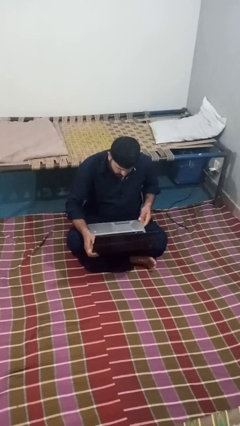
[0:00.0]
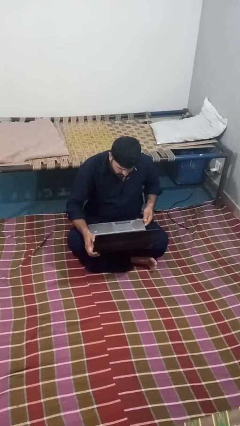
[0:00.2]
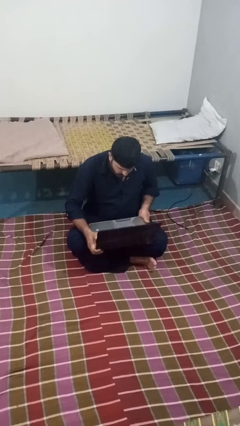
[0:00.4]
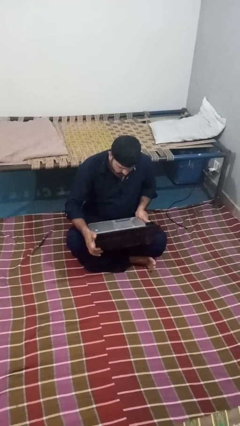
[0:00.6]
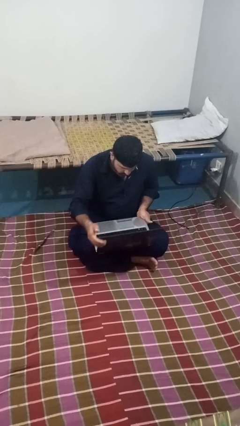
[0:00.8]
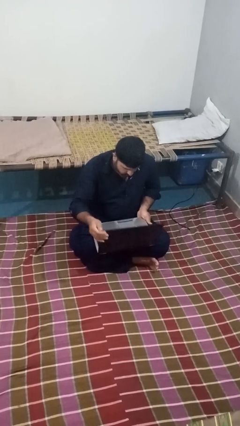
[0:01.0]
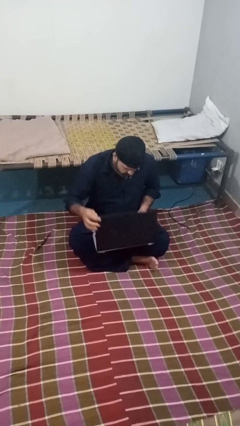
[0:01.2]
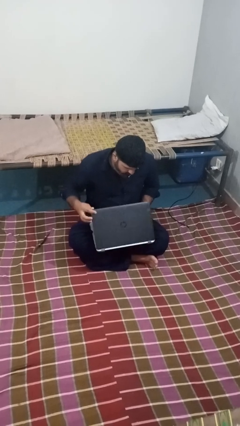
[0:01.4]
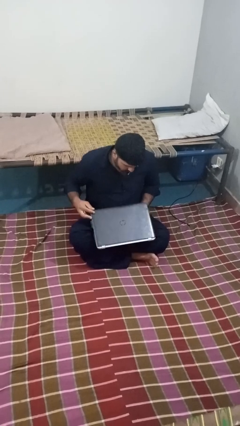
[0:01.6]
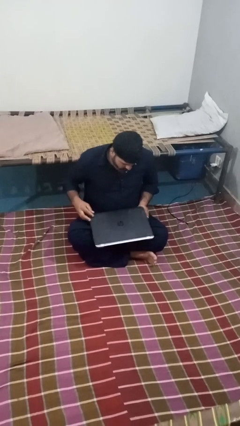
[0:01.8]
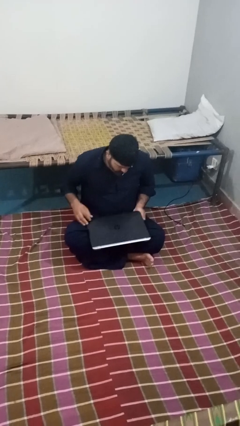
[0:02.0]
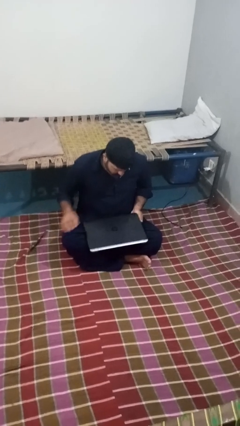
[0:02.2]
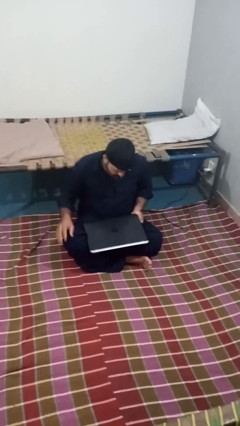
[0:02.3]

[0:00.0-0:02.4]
person closes laptop

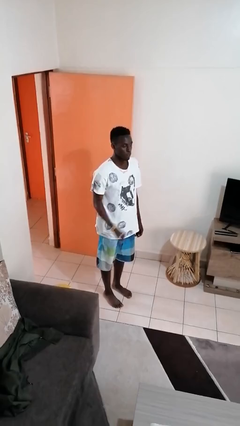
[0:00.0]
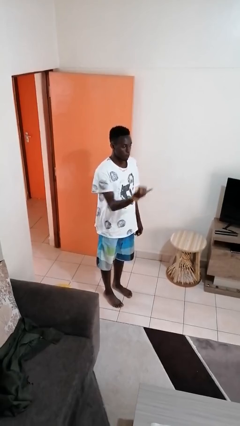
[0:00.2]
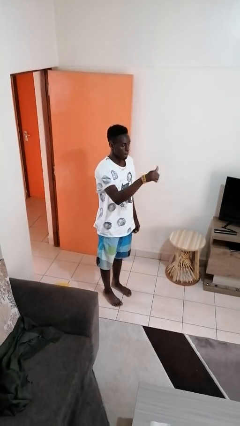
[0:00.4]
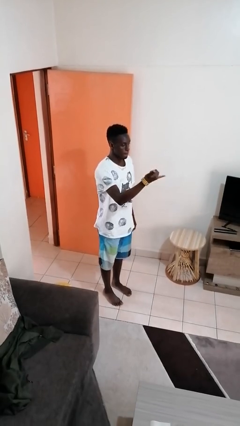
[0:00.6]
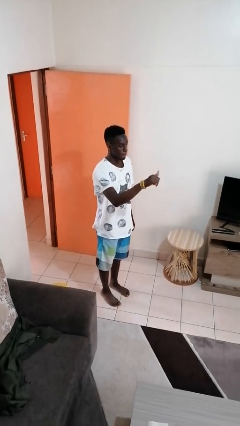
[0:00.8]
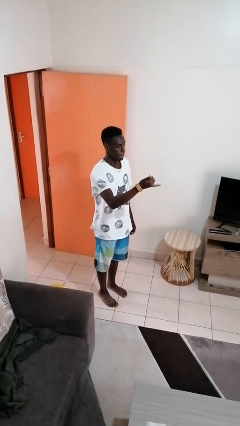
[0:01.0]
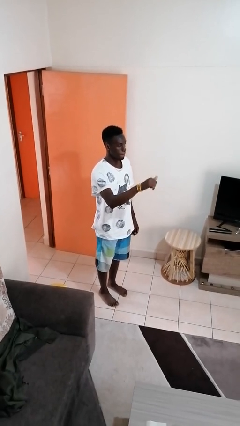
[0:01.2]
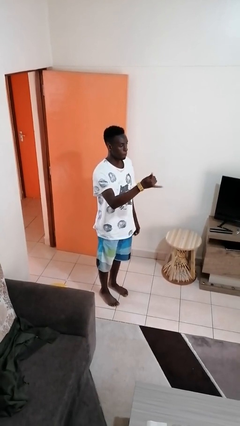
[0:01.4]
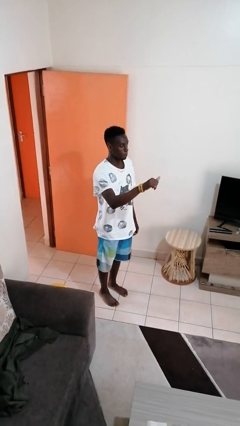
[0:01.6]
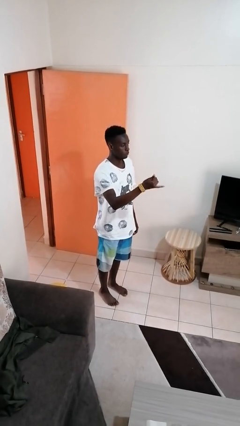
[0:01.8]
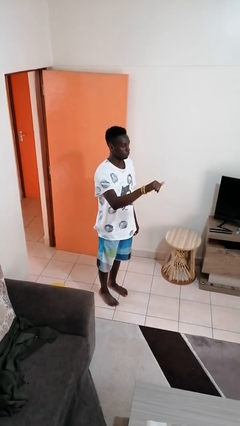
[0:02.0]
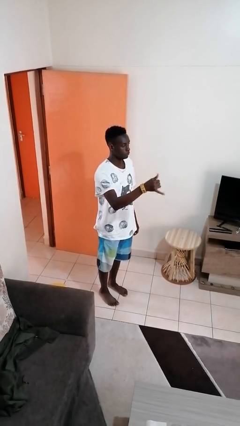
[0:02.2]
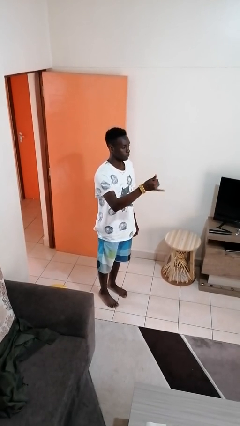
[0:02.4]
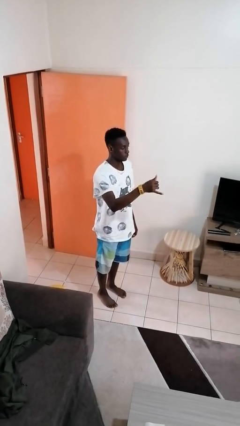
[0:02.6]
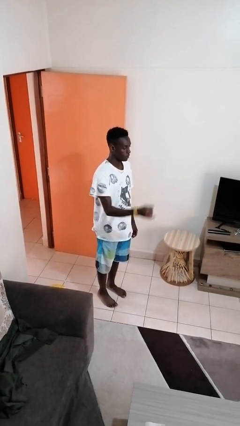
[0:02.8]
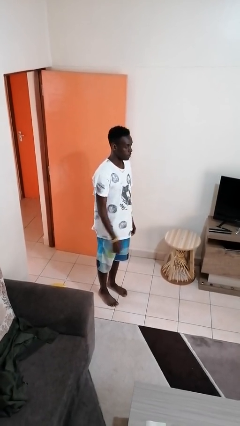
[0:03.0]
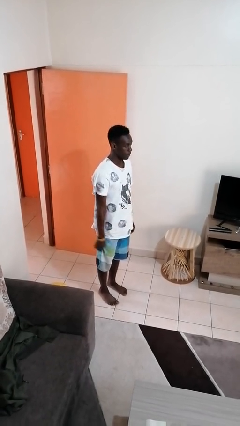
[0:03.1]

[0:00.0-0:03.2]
person gestures hang loose

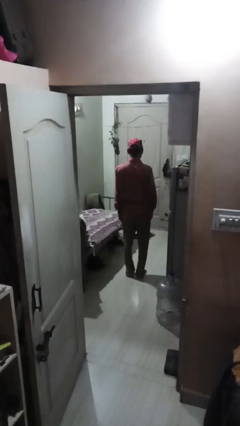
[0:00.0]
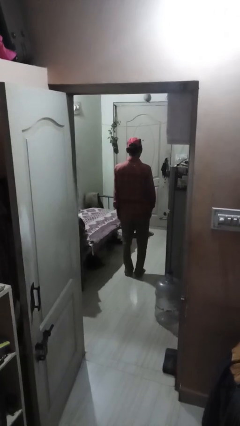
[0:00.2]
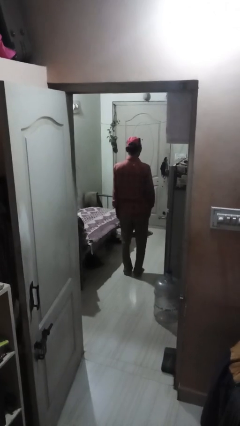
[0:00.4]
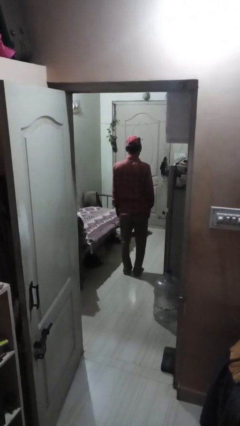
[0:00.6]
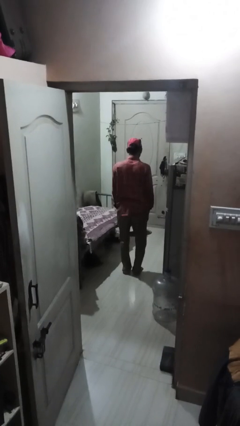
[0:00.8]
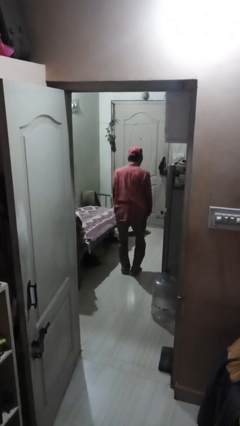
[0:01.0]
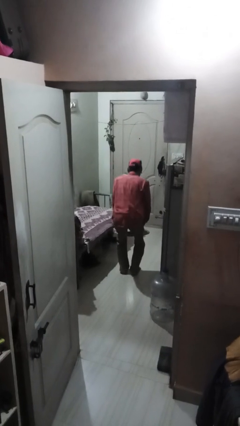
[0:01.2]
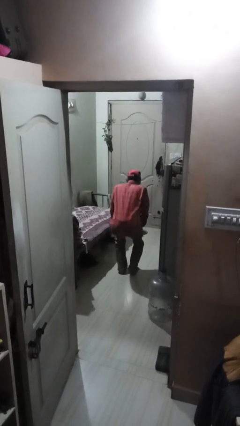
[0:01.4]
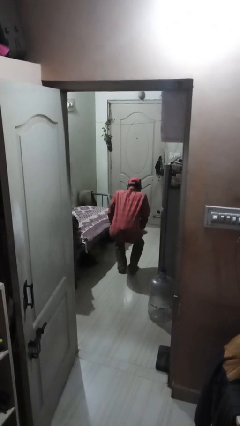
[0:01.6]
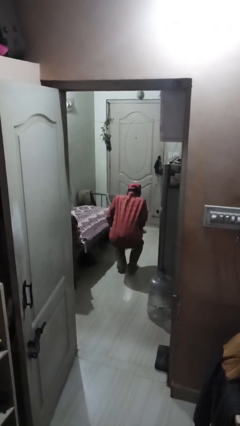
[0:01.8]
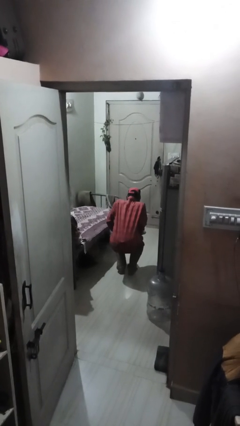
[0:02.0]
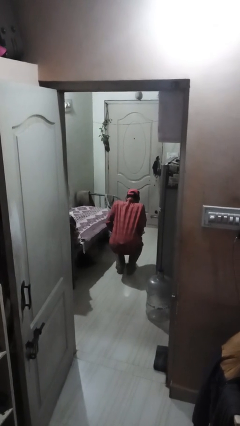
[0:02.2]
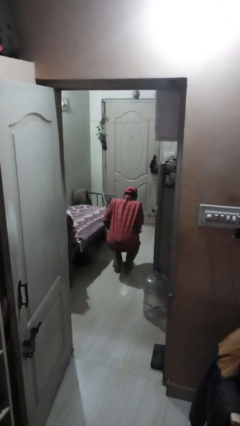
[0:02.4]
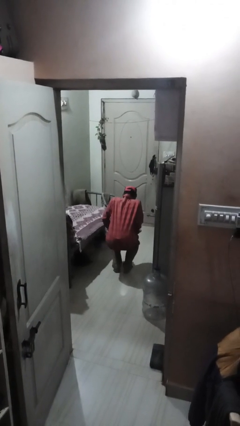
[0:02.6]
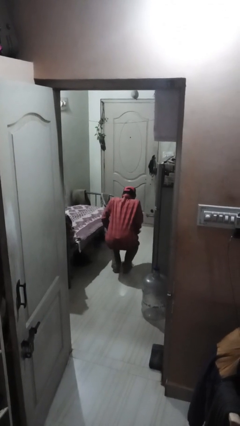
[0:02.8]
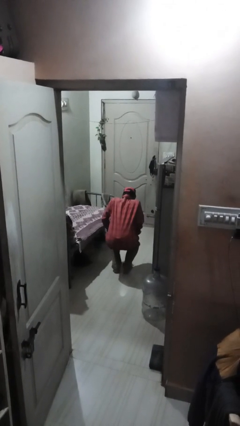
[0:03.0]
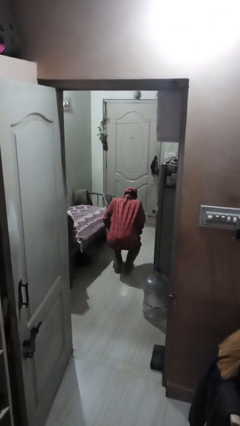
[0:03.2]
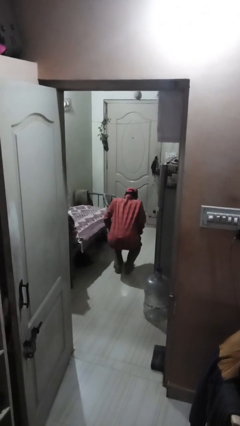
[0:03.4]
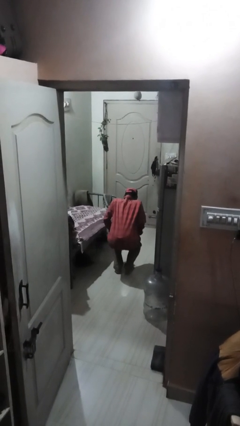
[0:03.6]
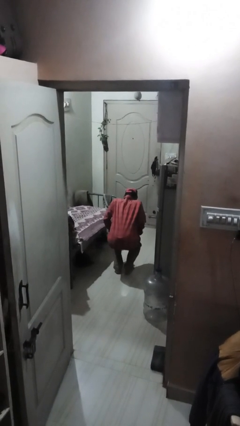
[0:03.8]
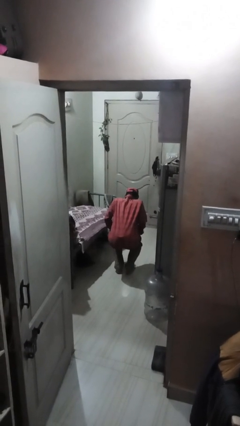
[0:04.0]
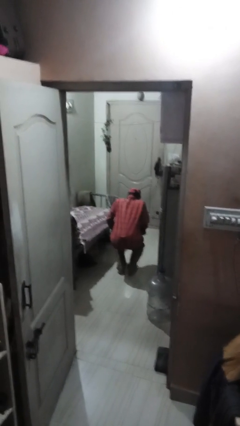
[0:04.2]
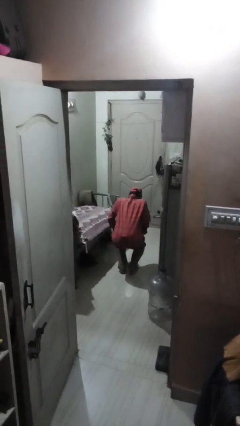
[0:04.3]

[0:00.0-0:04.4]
person squats

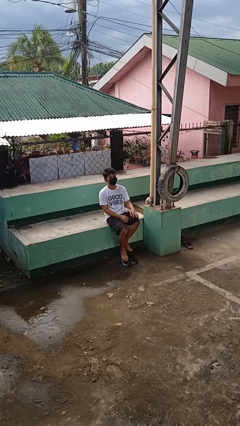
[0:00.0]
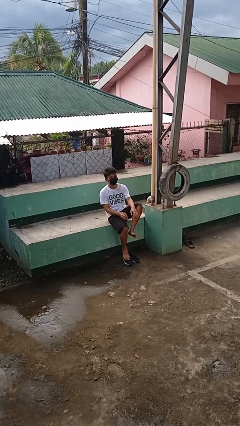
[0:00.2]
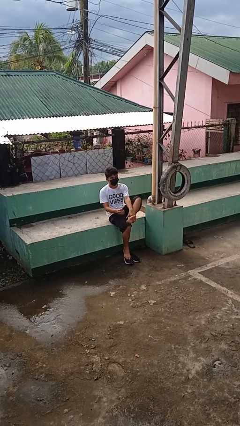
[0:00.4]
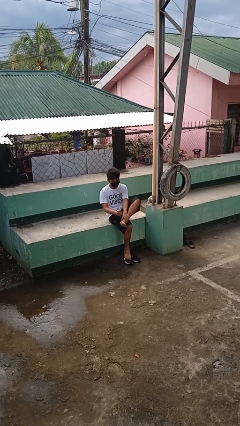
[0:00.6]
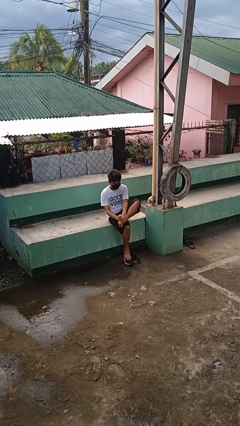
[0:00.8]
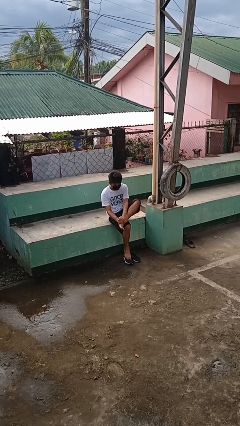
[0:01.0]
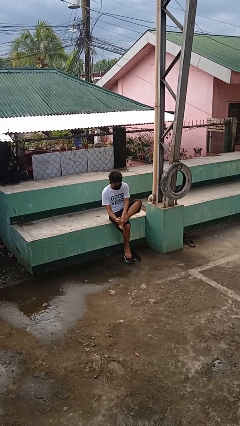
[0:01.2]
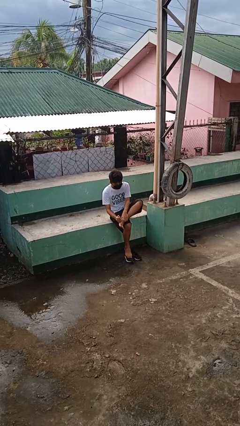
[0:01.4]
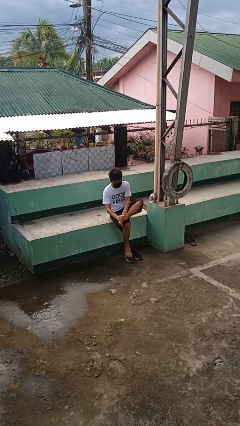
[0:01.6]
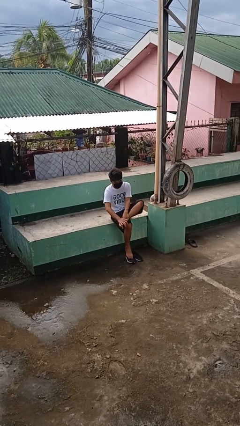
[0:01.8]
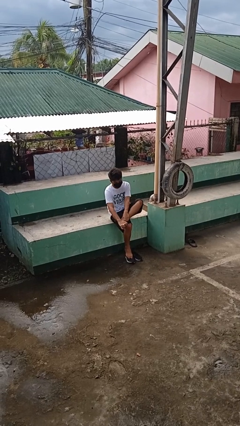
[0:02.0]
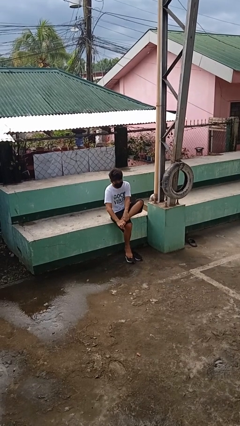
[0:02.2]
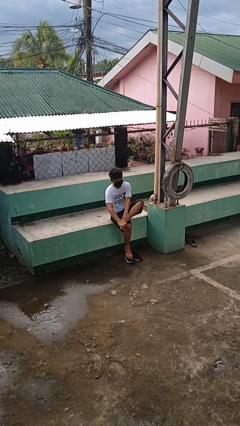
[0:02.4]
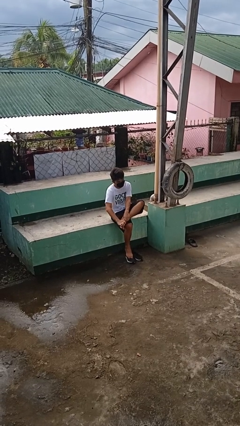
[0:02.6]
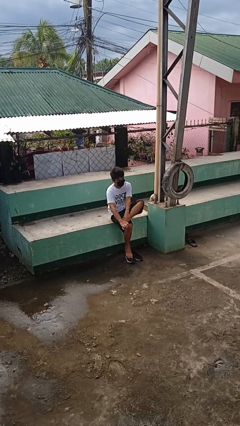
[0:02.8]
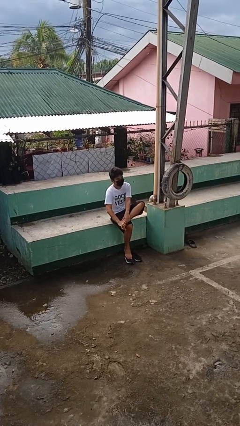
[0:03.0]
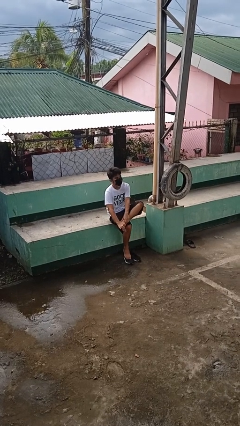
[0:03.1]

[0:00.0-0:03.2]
person rubs foot

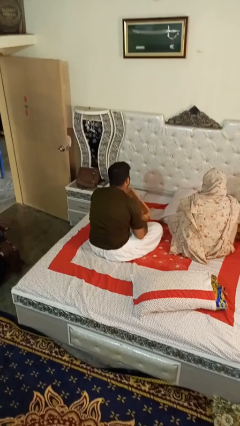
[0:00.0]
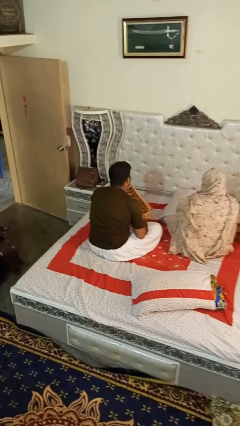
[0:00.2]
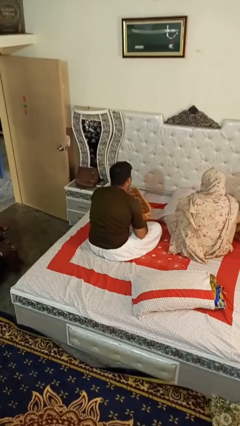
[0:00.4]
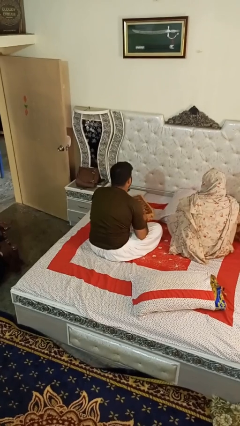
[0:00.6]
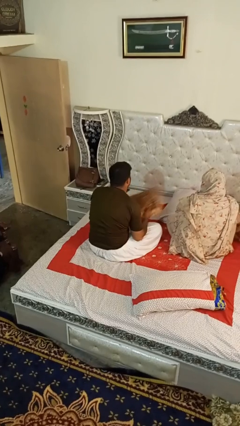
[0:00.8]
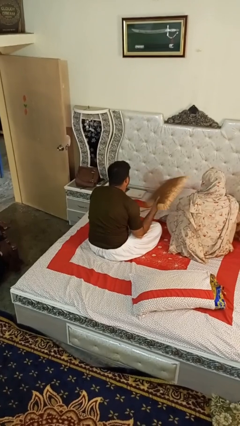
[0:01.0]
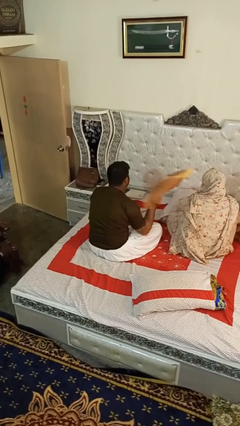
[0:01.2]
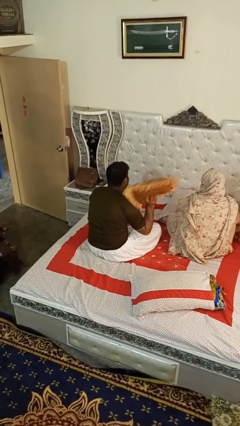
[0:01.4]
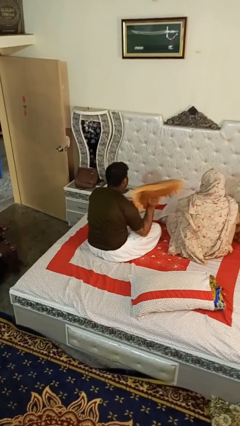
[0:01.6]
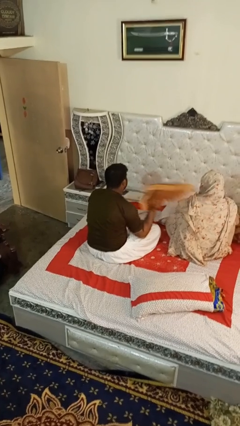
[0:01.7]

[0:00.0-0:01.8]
person hits person with pillow

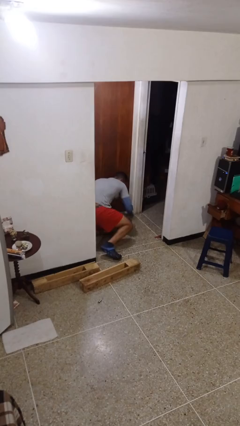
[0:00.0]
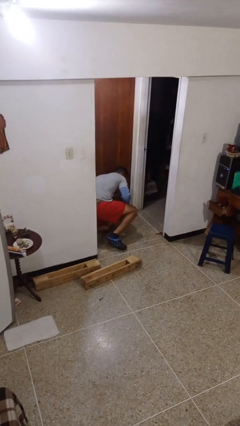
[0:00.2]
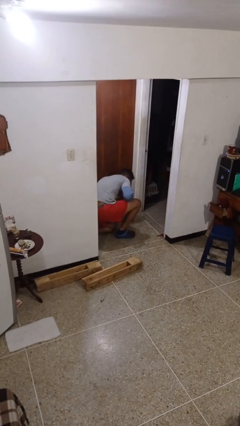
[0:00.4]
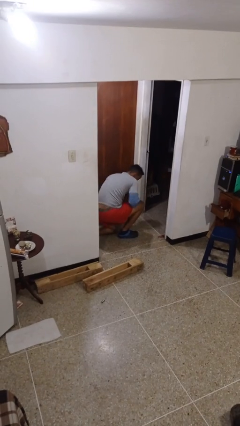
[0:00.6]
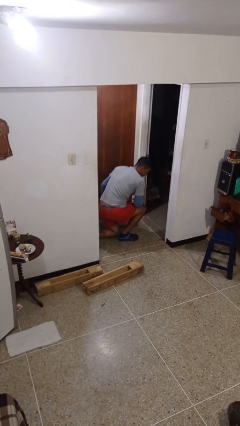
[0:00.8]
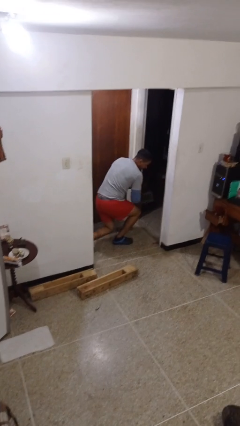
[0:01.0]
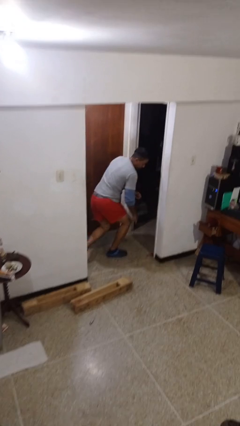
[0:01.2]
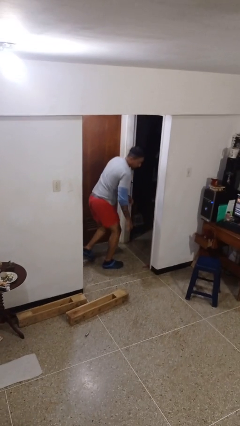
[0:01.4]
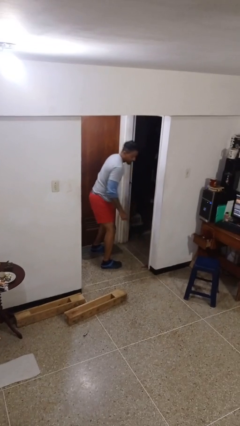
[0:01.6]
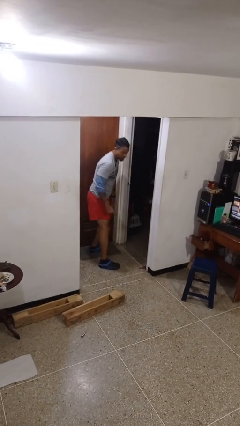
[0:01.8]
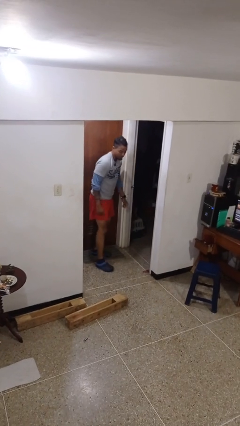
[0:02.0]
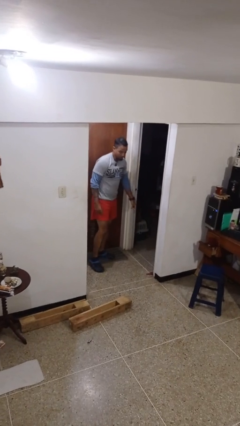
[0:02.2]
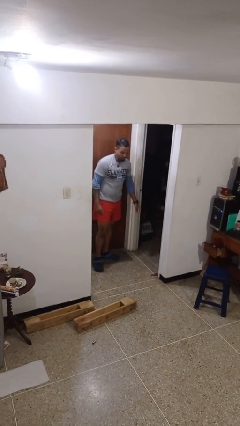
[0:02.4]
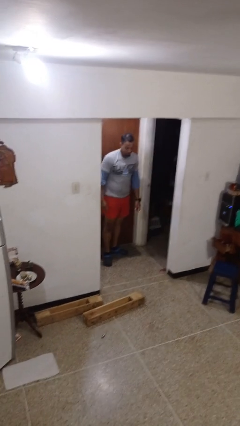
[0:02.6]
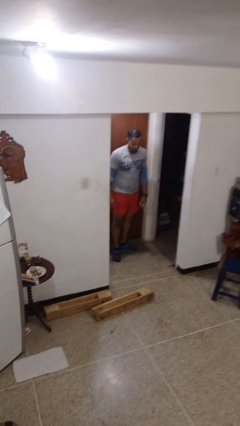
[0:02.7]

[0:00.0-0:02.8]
person stands up from floor
